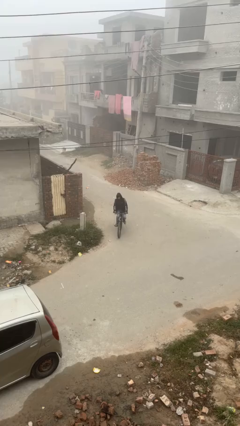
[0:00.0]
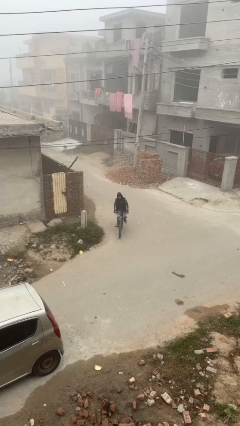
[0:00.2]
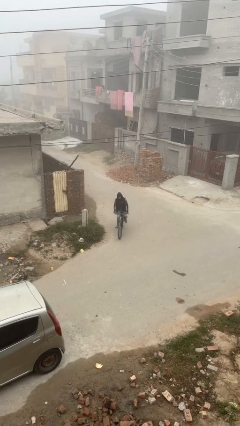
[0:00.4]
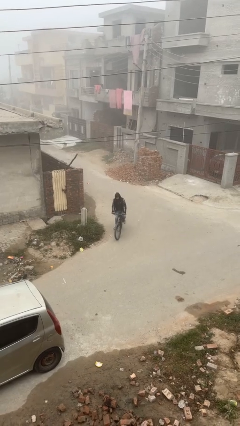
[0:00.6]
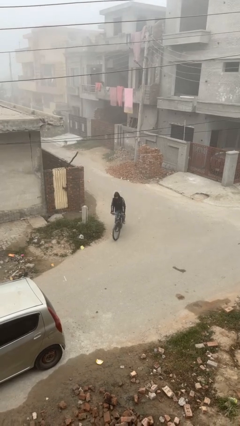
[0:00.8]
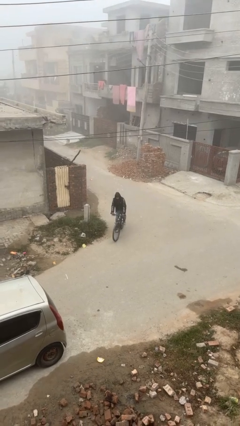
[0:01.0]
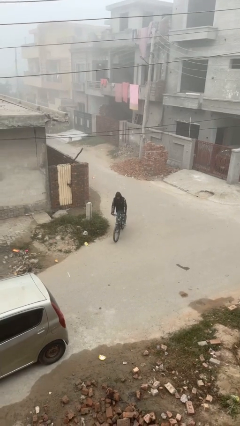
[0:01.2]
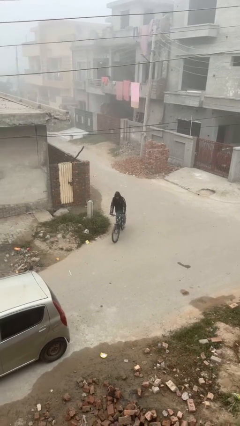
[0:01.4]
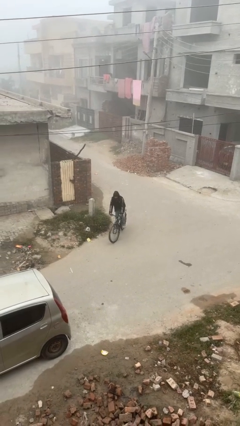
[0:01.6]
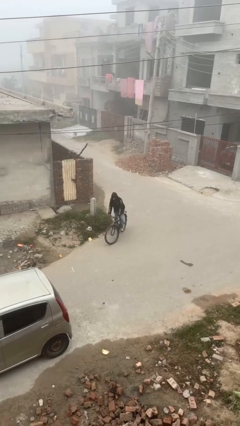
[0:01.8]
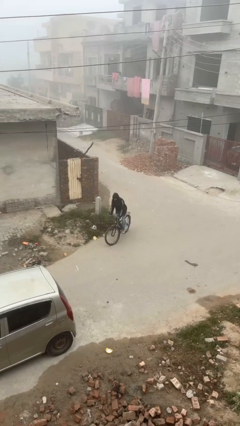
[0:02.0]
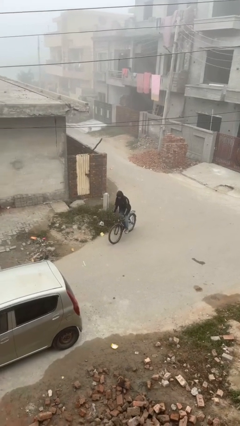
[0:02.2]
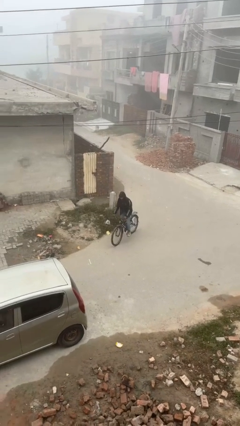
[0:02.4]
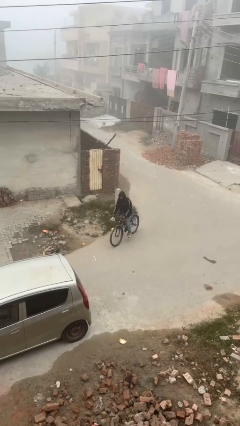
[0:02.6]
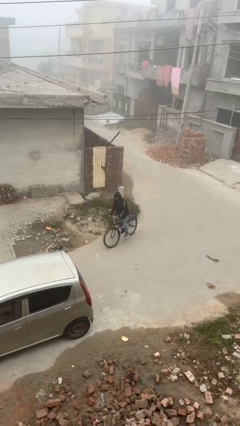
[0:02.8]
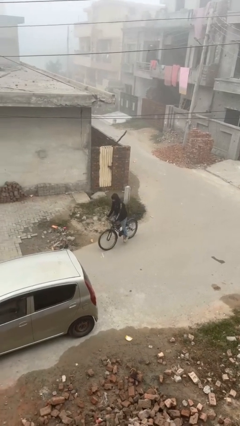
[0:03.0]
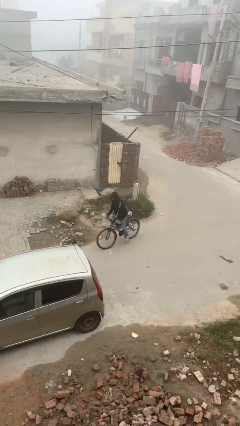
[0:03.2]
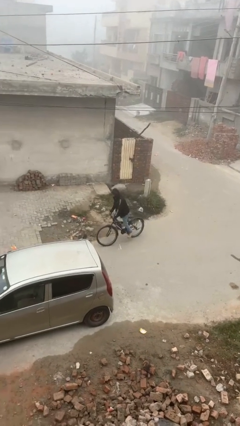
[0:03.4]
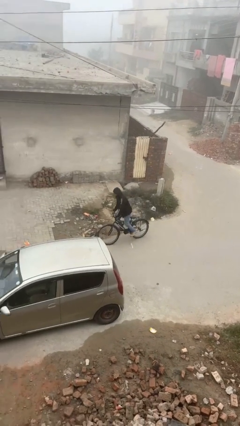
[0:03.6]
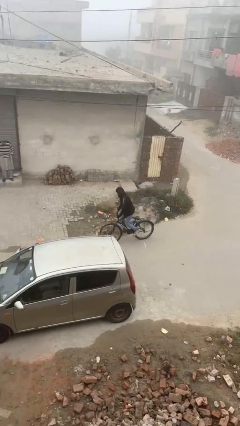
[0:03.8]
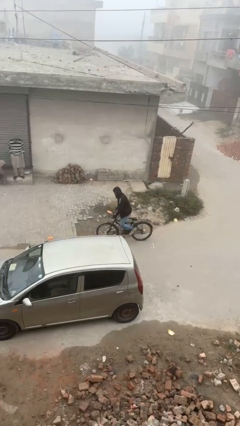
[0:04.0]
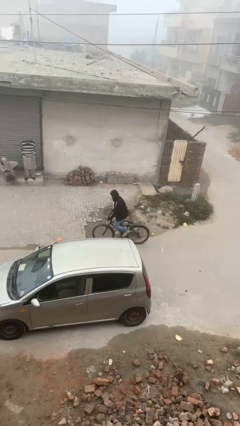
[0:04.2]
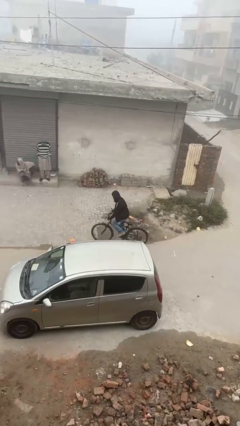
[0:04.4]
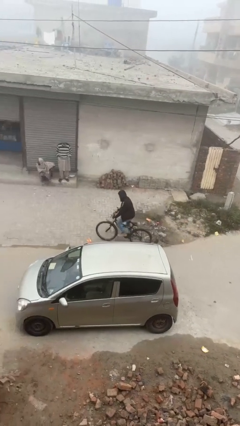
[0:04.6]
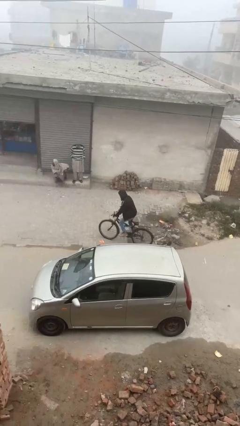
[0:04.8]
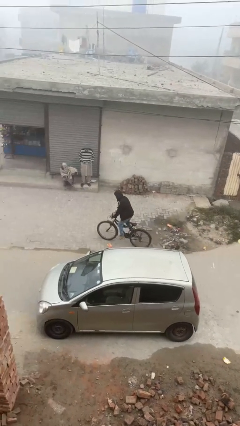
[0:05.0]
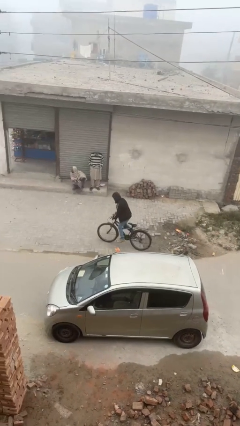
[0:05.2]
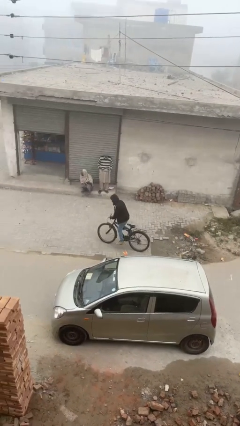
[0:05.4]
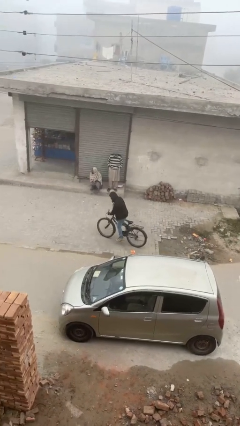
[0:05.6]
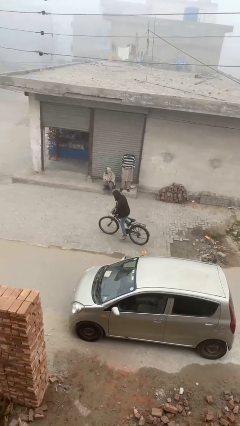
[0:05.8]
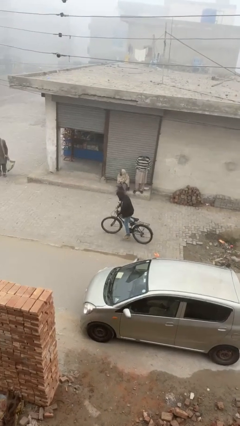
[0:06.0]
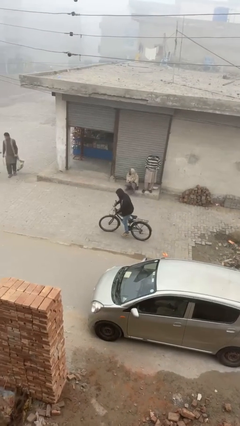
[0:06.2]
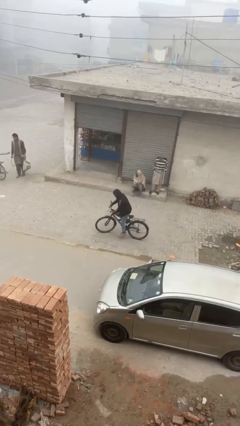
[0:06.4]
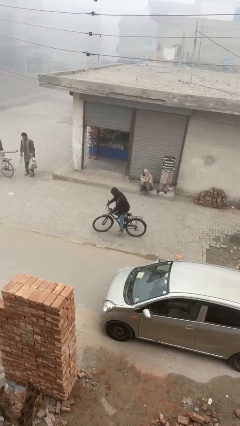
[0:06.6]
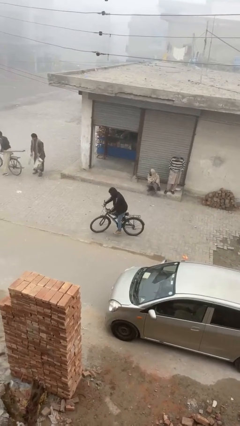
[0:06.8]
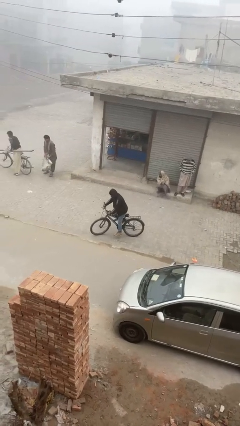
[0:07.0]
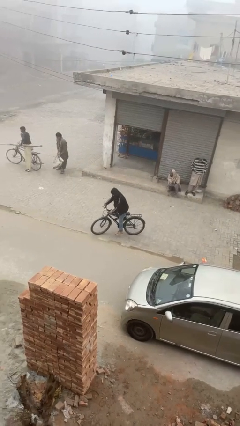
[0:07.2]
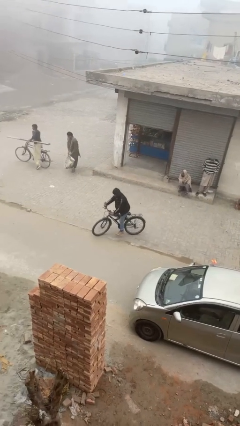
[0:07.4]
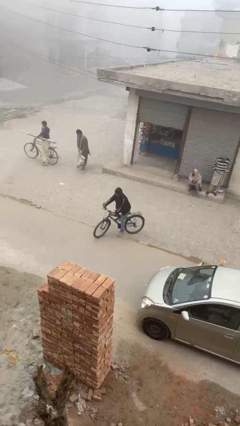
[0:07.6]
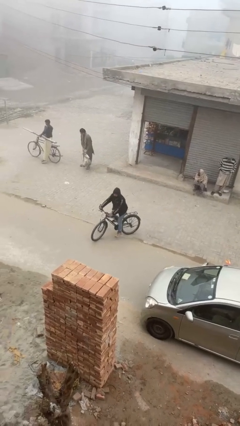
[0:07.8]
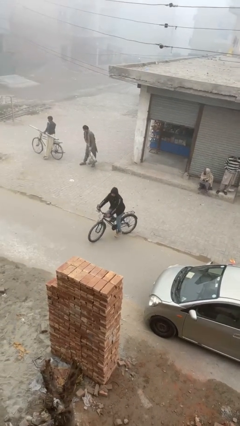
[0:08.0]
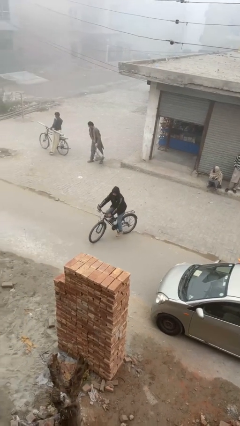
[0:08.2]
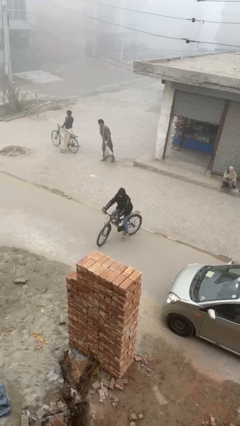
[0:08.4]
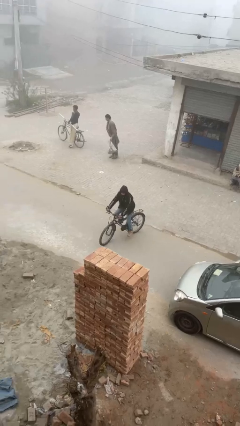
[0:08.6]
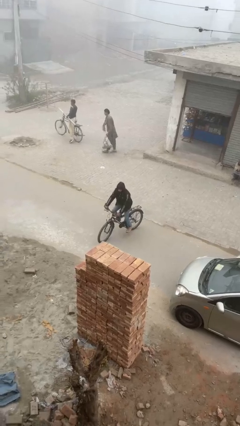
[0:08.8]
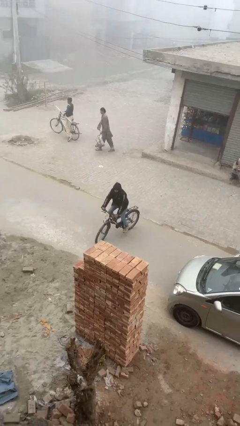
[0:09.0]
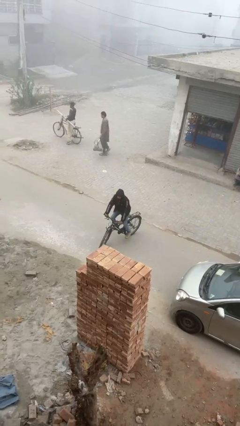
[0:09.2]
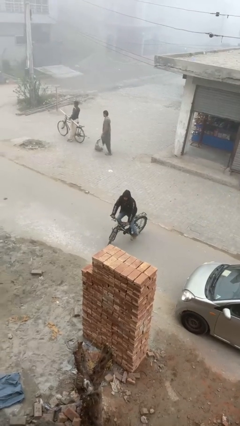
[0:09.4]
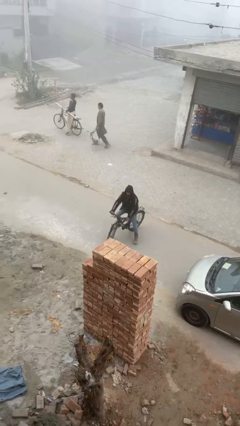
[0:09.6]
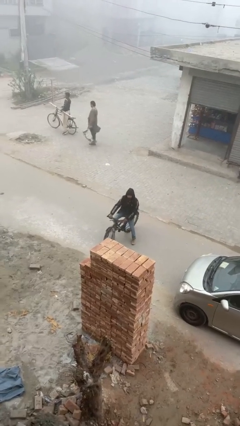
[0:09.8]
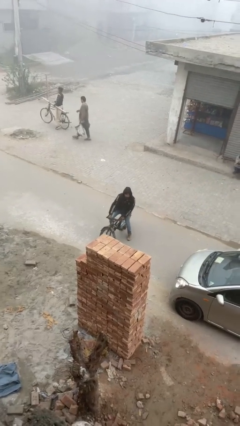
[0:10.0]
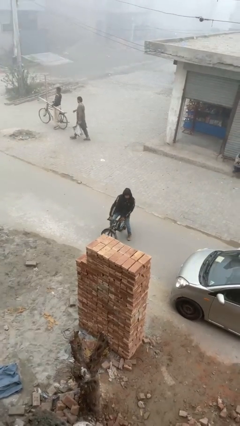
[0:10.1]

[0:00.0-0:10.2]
person rides bicycle

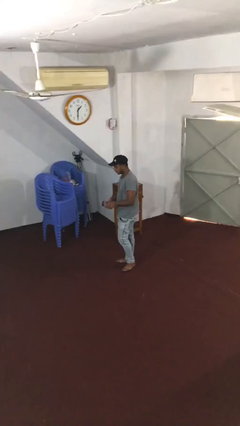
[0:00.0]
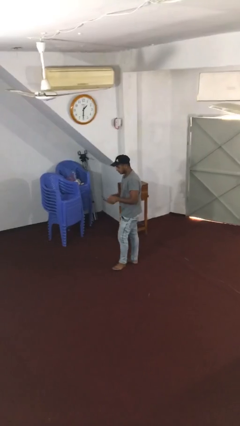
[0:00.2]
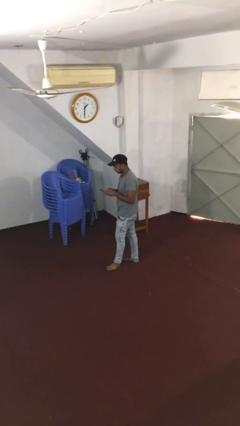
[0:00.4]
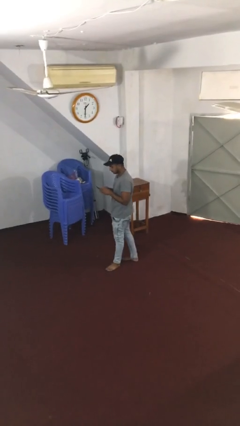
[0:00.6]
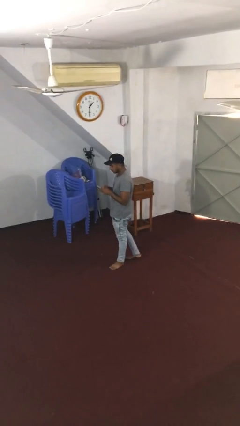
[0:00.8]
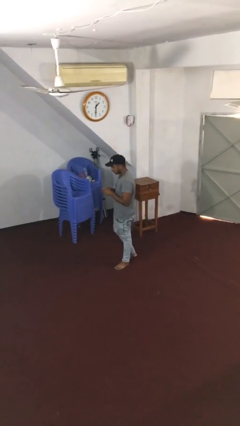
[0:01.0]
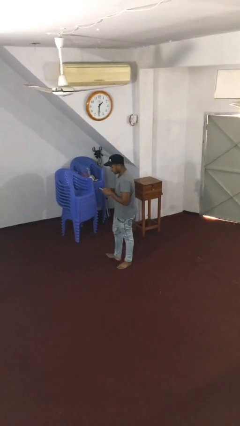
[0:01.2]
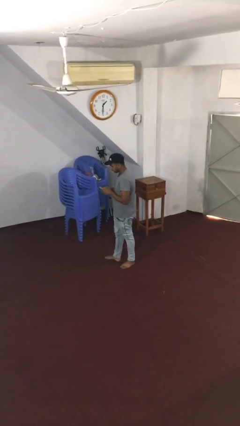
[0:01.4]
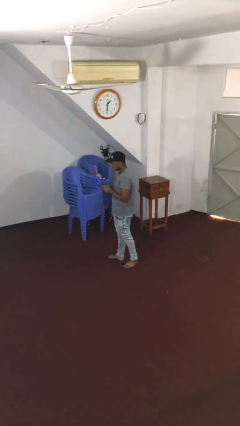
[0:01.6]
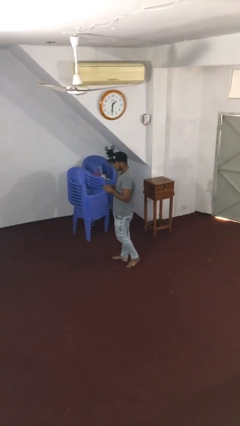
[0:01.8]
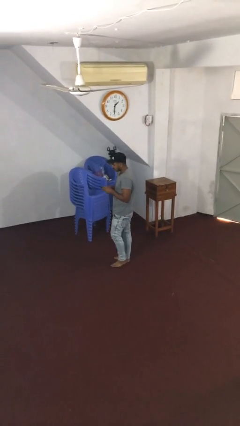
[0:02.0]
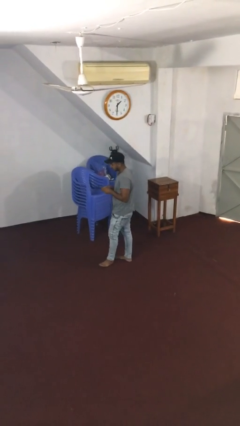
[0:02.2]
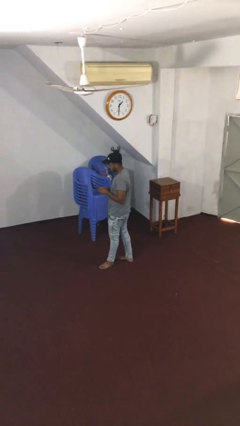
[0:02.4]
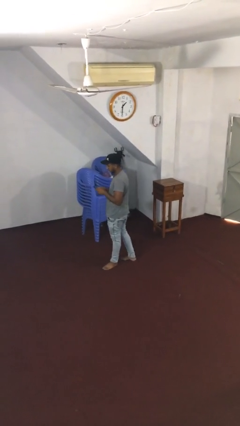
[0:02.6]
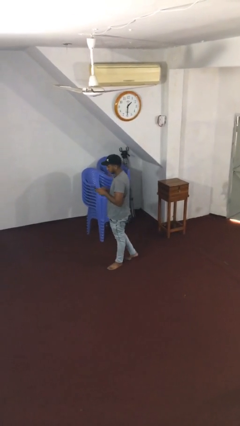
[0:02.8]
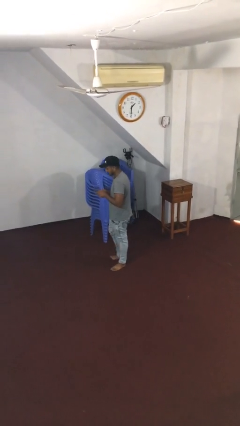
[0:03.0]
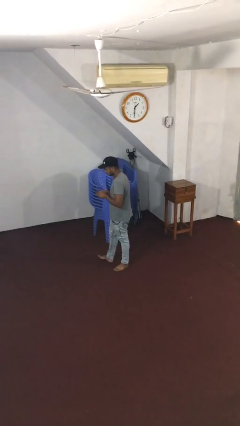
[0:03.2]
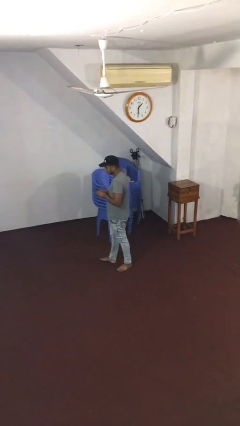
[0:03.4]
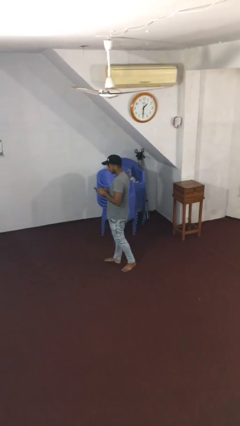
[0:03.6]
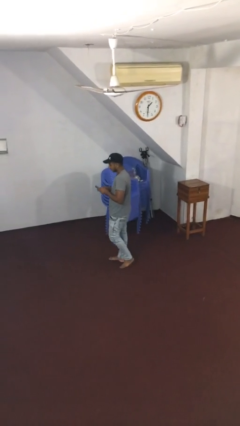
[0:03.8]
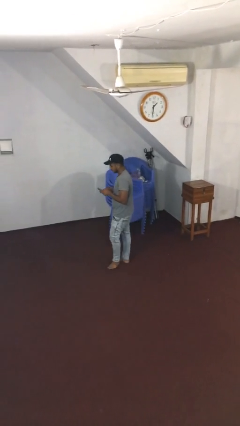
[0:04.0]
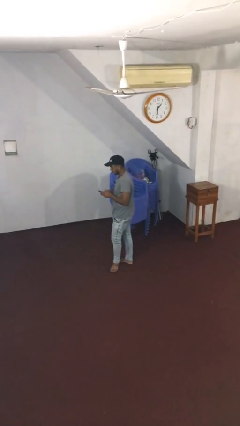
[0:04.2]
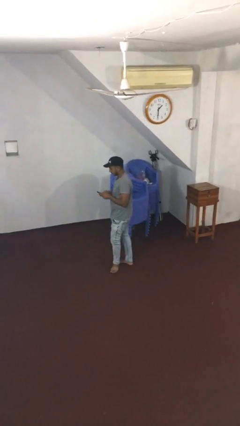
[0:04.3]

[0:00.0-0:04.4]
person texts on phone

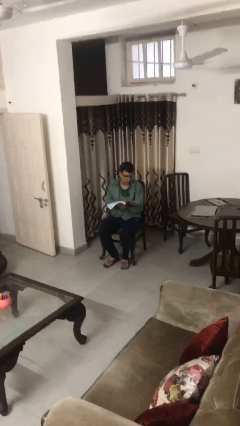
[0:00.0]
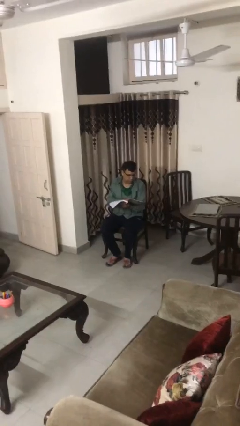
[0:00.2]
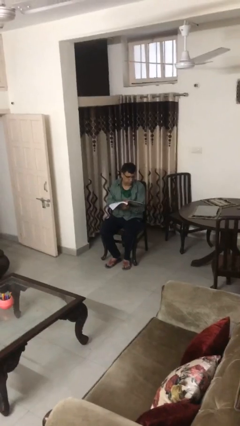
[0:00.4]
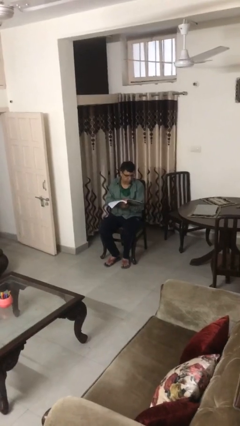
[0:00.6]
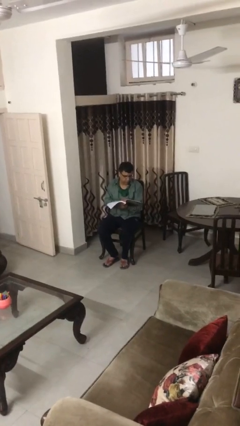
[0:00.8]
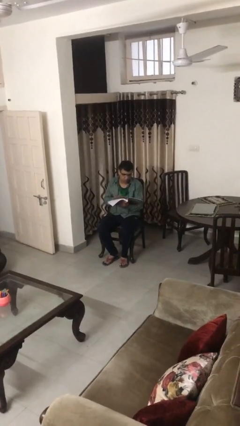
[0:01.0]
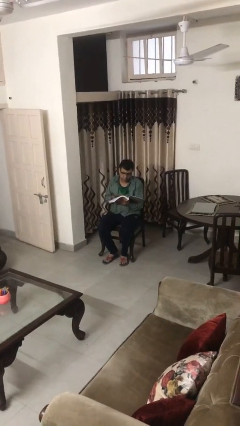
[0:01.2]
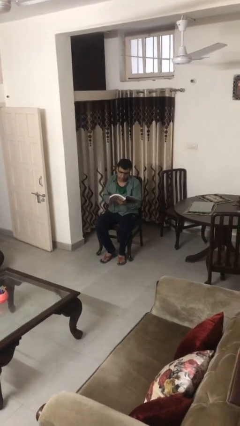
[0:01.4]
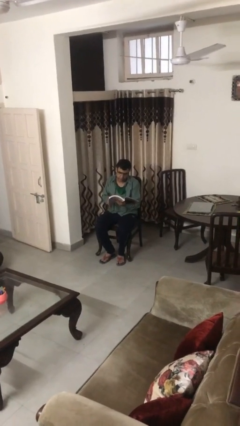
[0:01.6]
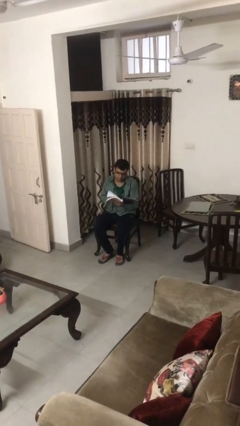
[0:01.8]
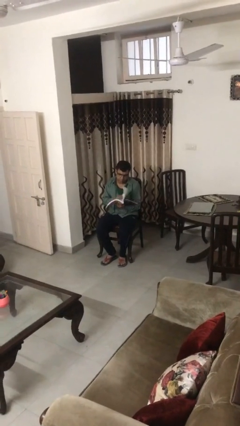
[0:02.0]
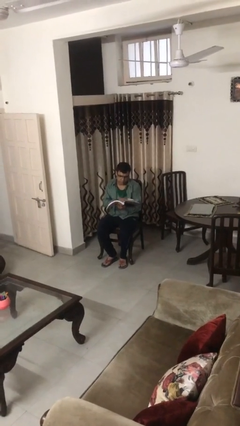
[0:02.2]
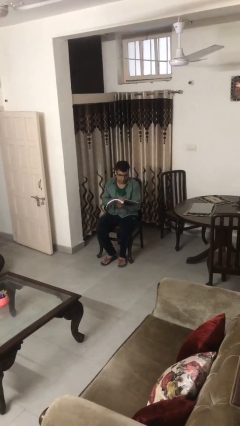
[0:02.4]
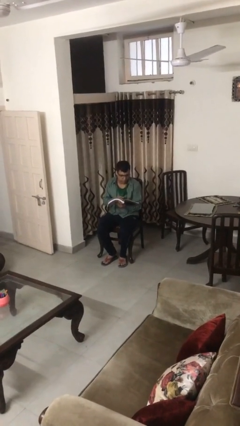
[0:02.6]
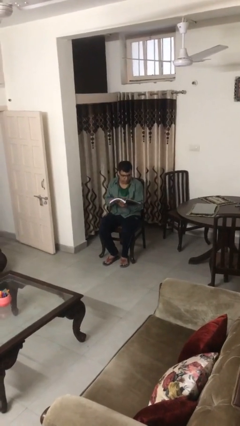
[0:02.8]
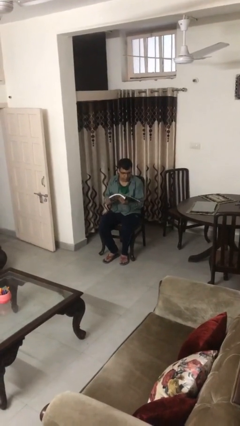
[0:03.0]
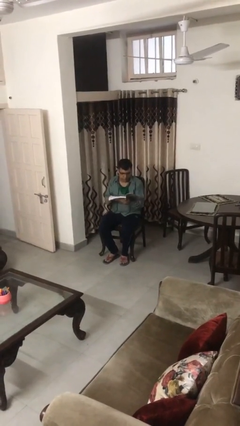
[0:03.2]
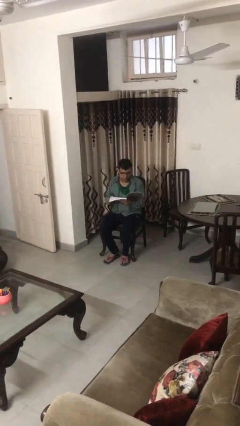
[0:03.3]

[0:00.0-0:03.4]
person reads document
